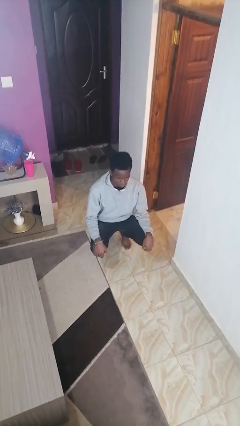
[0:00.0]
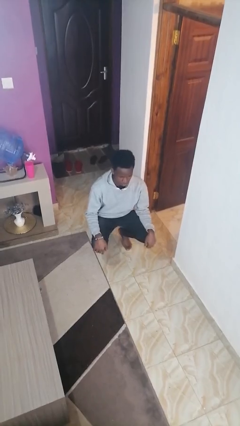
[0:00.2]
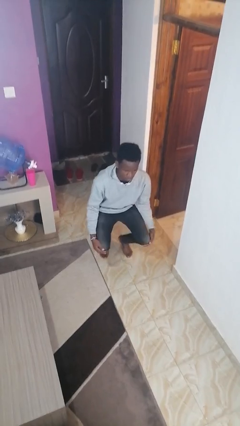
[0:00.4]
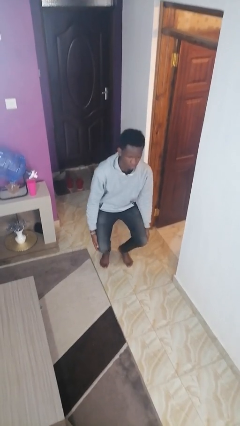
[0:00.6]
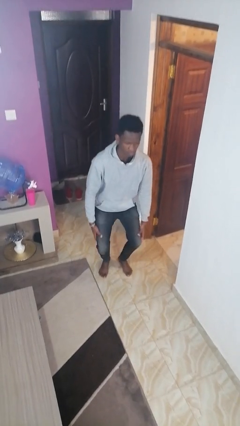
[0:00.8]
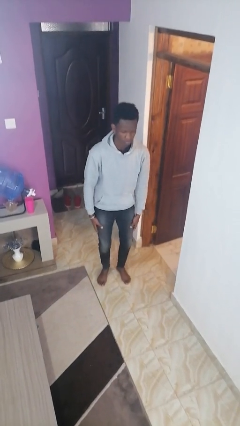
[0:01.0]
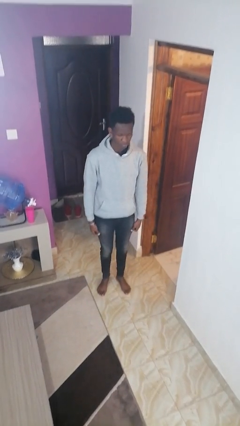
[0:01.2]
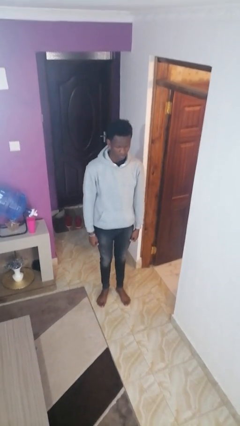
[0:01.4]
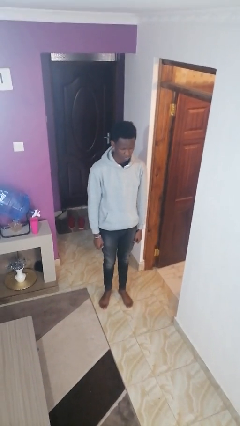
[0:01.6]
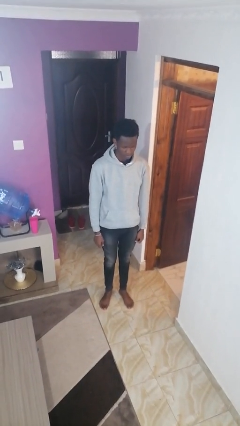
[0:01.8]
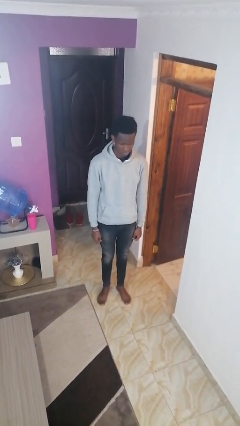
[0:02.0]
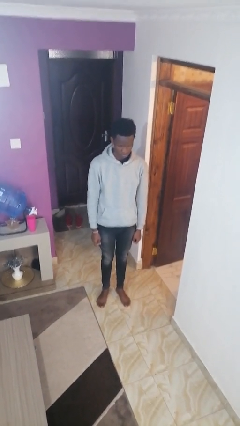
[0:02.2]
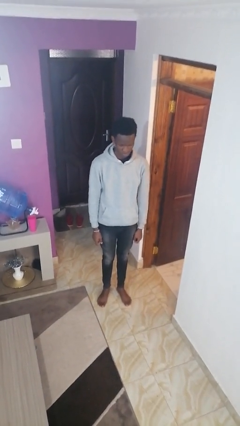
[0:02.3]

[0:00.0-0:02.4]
person stands up

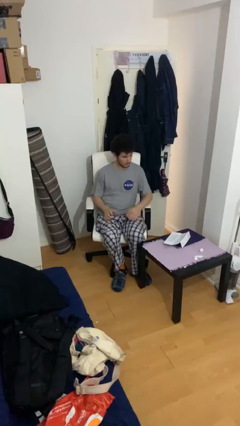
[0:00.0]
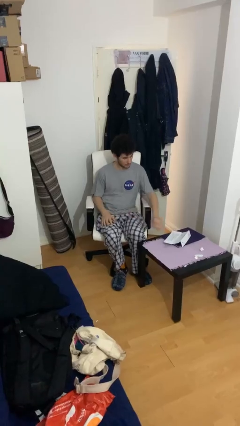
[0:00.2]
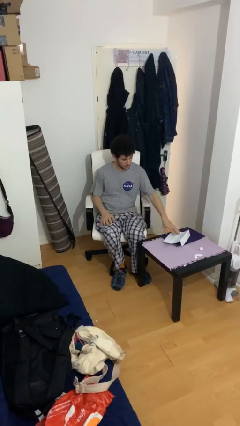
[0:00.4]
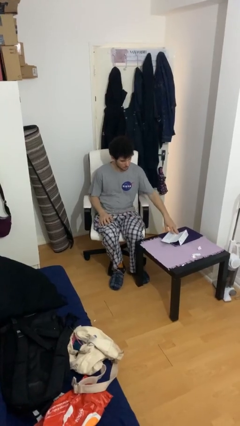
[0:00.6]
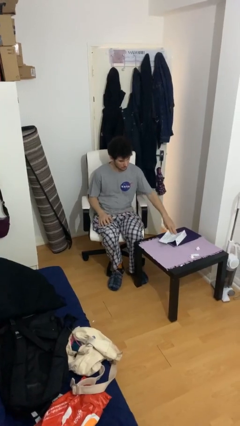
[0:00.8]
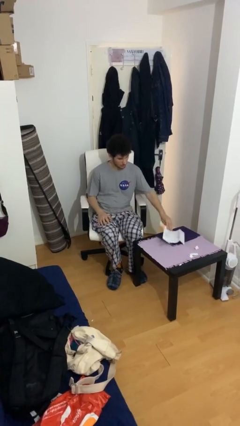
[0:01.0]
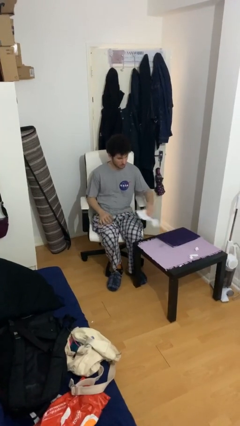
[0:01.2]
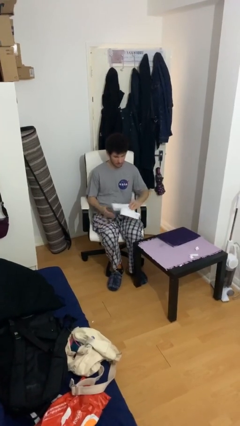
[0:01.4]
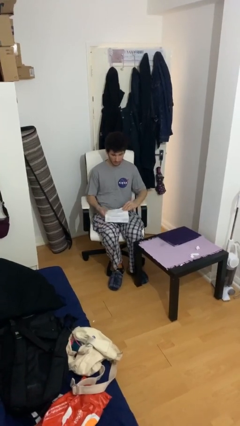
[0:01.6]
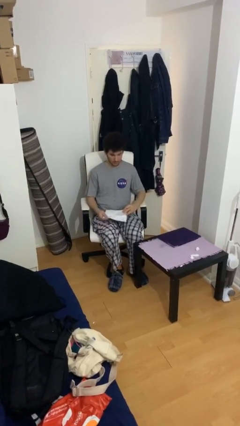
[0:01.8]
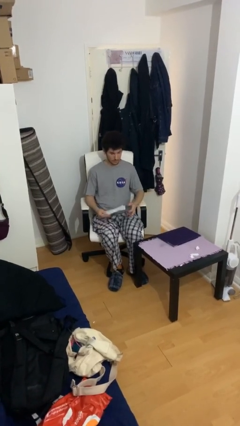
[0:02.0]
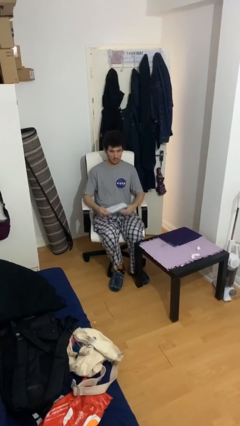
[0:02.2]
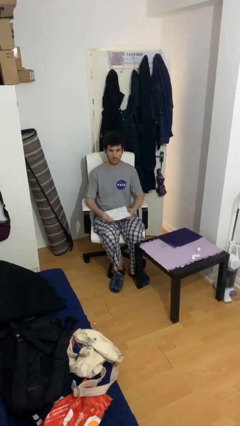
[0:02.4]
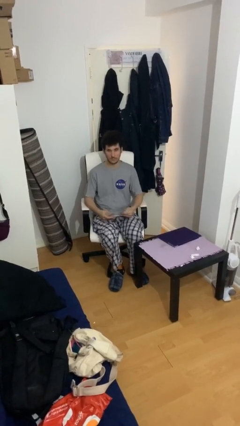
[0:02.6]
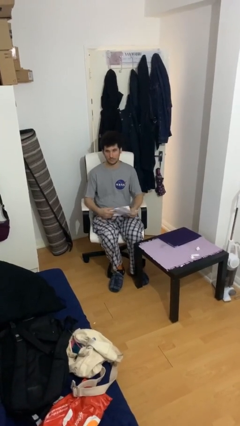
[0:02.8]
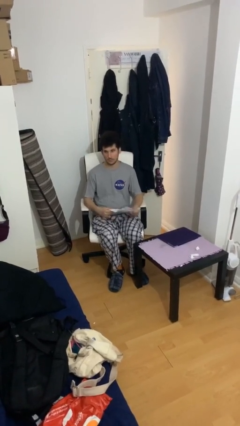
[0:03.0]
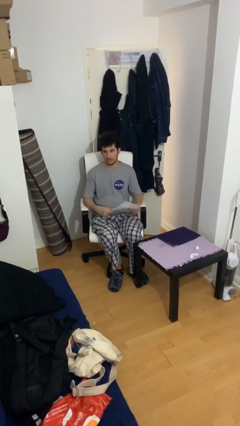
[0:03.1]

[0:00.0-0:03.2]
person picks up object from table

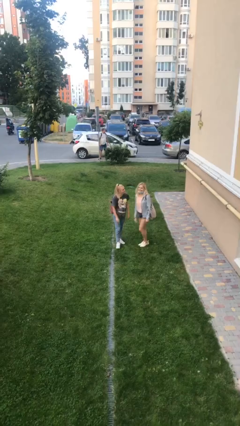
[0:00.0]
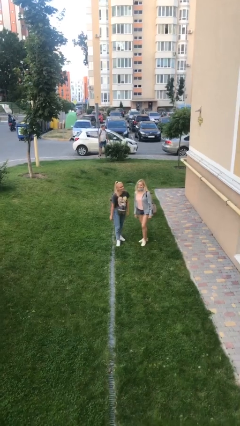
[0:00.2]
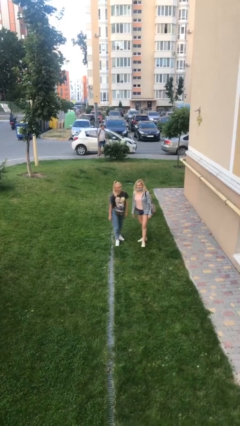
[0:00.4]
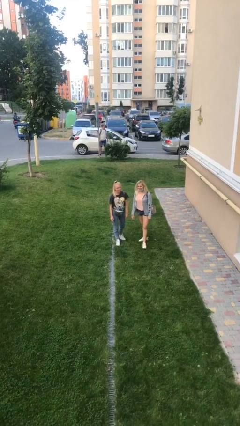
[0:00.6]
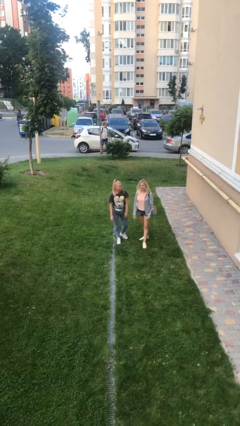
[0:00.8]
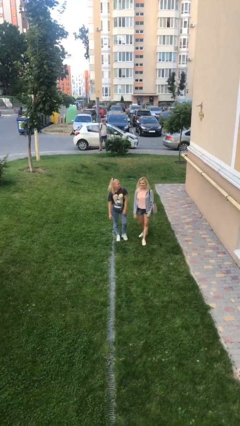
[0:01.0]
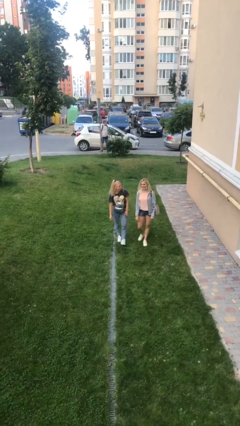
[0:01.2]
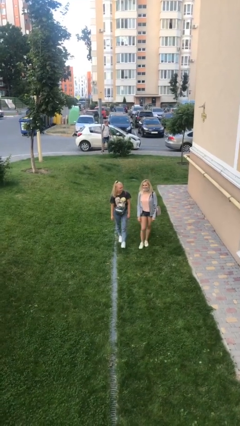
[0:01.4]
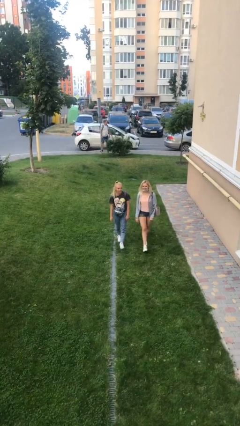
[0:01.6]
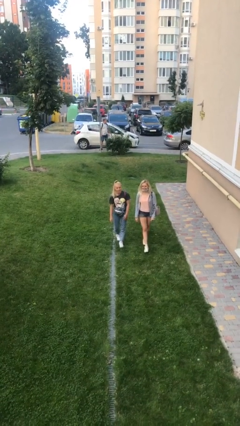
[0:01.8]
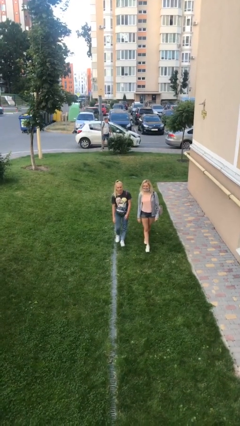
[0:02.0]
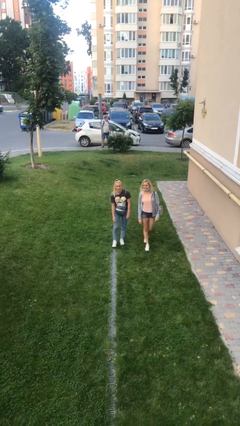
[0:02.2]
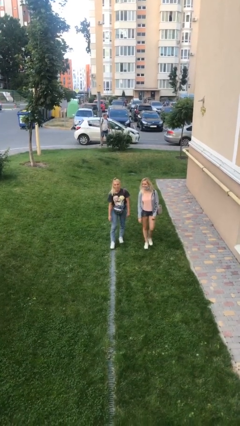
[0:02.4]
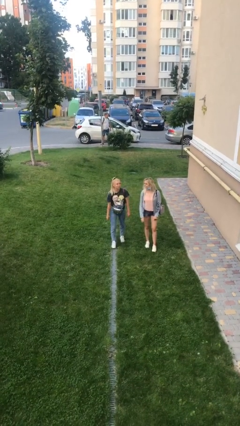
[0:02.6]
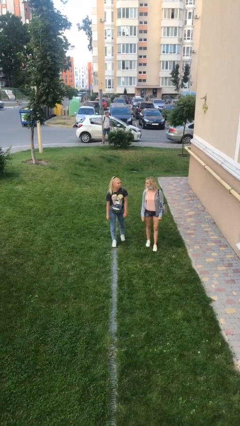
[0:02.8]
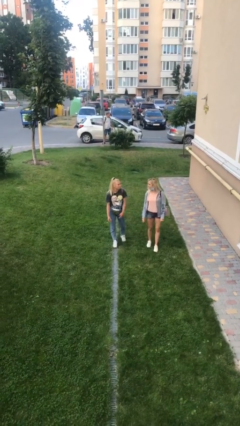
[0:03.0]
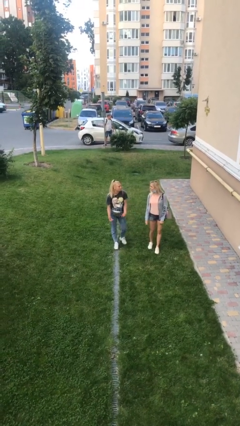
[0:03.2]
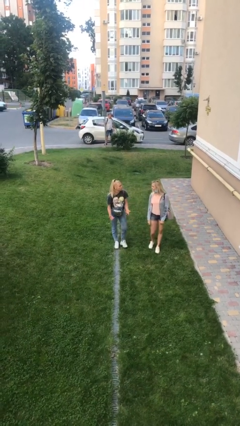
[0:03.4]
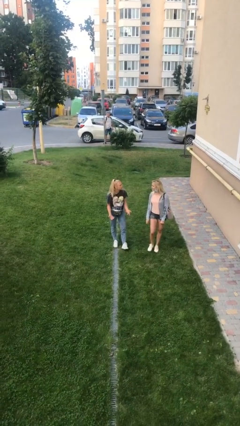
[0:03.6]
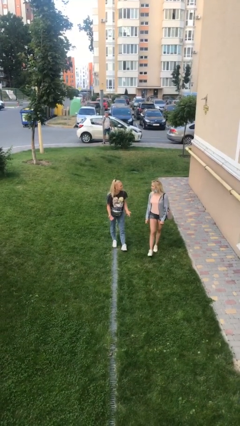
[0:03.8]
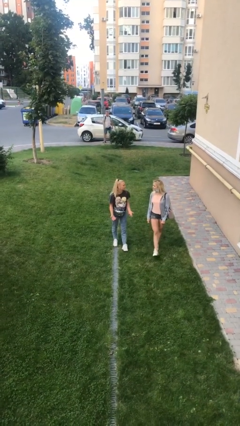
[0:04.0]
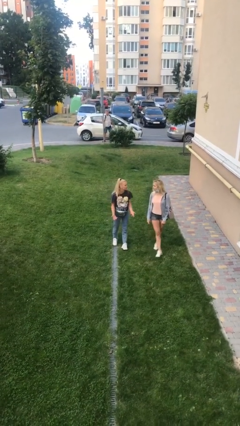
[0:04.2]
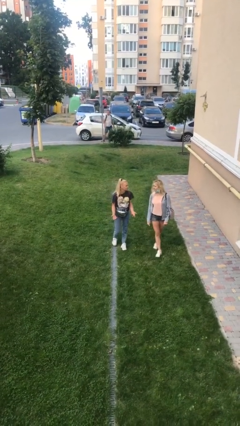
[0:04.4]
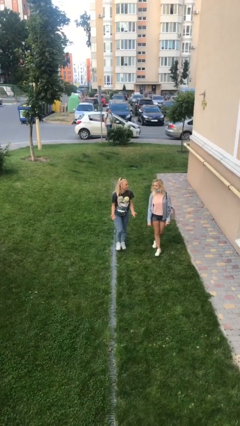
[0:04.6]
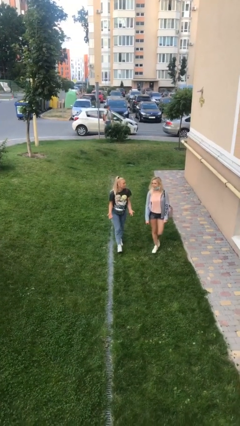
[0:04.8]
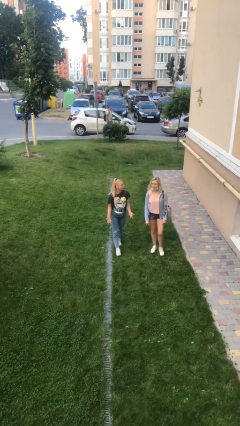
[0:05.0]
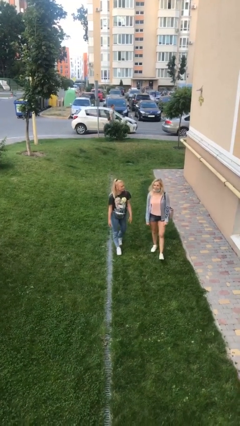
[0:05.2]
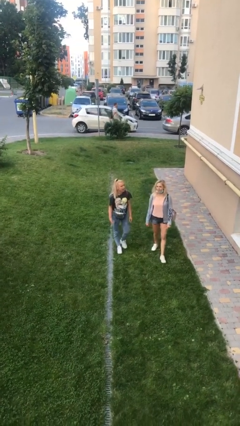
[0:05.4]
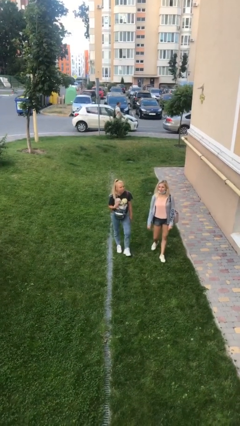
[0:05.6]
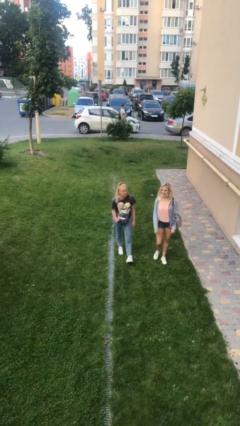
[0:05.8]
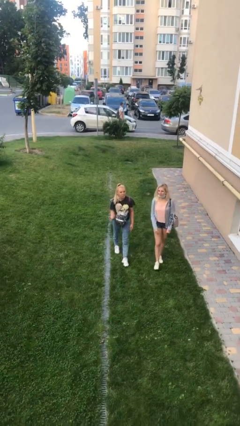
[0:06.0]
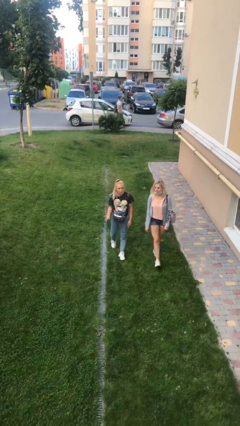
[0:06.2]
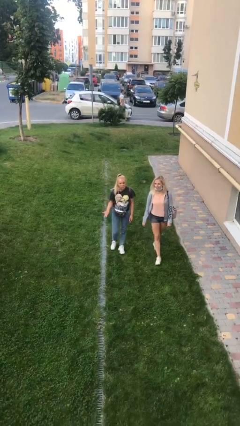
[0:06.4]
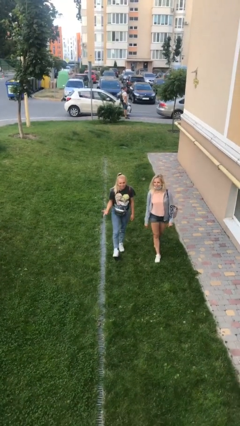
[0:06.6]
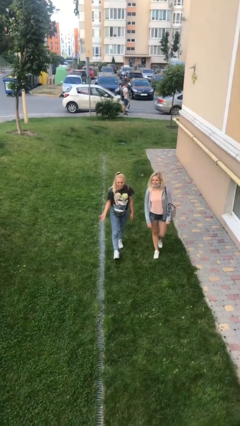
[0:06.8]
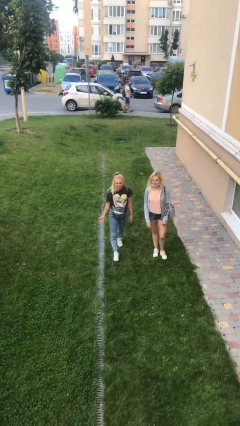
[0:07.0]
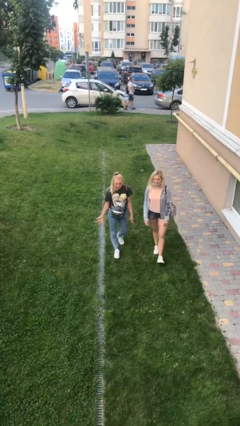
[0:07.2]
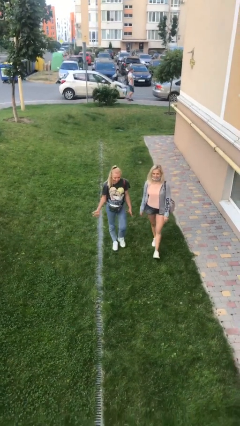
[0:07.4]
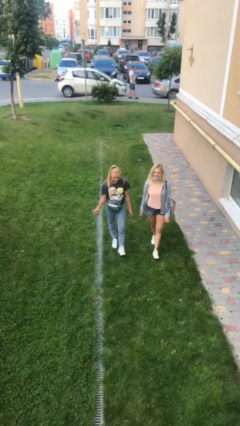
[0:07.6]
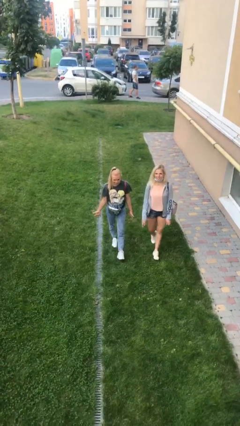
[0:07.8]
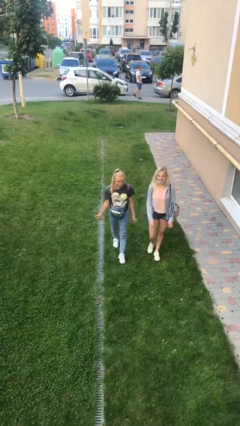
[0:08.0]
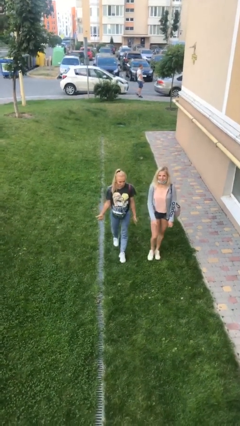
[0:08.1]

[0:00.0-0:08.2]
person talks to person

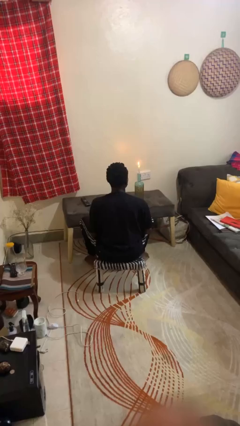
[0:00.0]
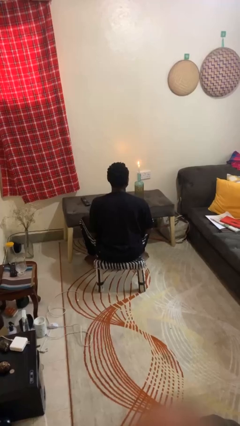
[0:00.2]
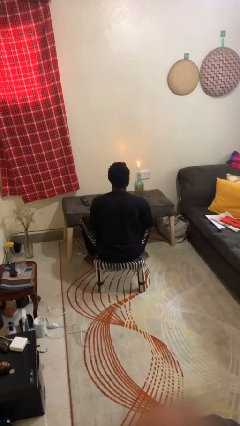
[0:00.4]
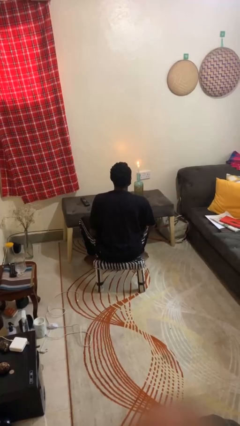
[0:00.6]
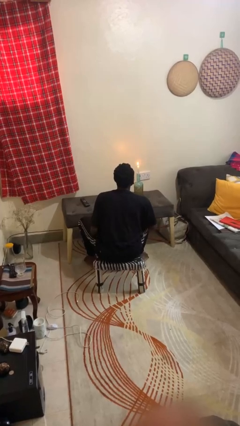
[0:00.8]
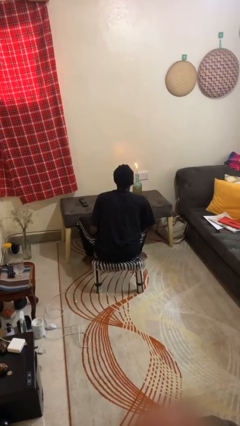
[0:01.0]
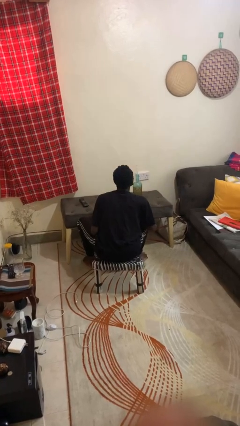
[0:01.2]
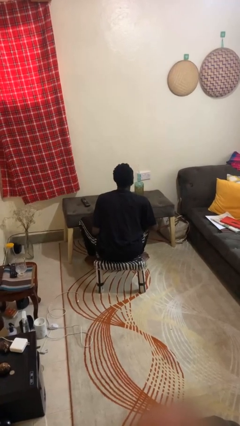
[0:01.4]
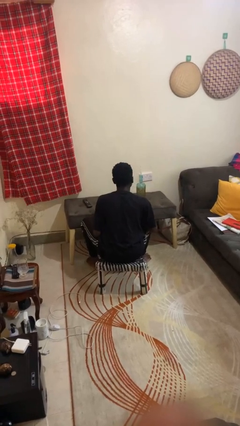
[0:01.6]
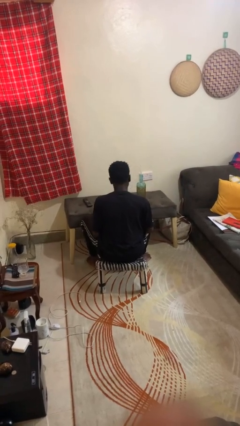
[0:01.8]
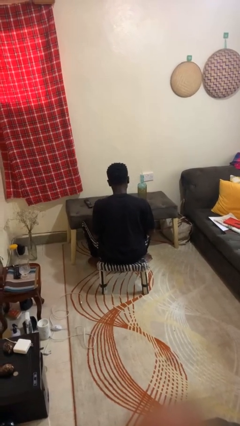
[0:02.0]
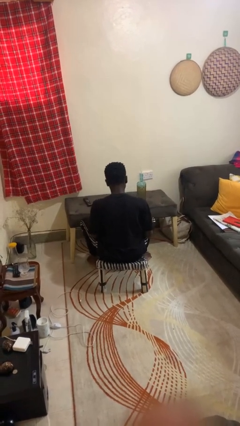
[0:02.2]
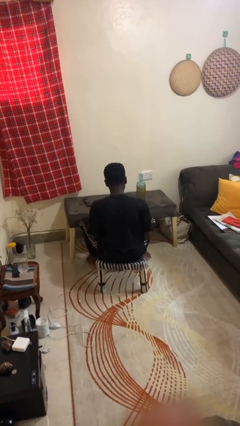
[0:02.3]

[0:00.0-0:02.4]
person extinguishes candle

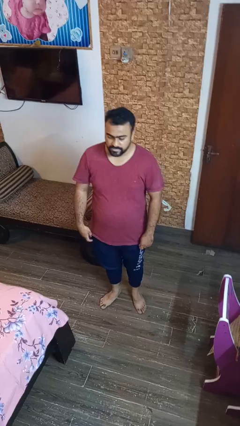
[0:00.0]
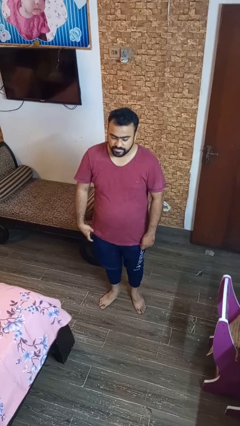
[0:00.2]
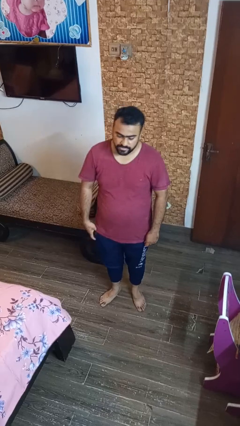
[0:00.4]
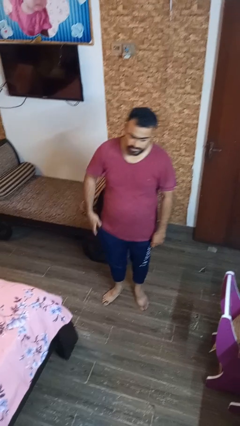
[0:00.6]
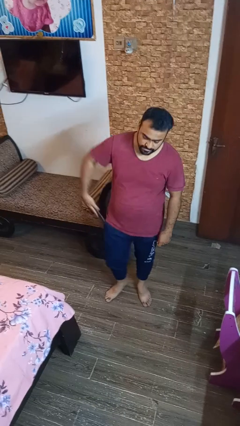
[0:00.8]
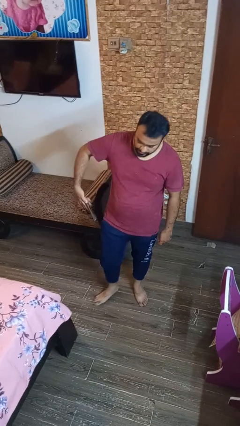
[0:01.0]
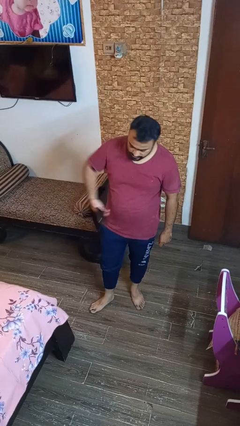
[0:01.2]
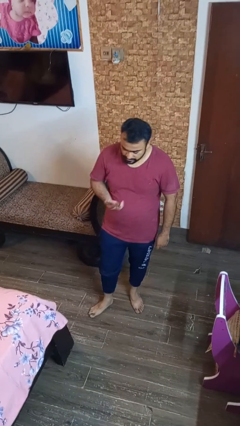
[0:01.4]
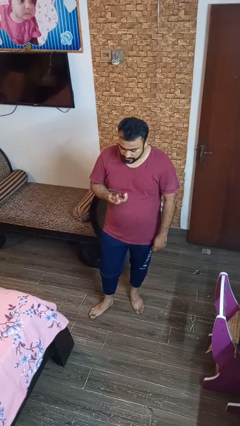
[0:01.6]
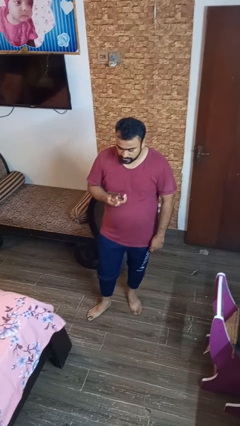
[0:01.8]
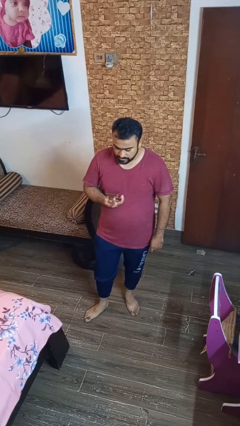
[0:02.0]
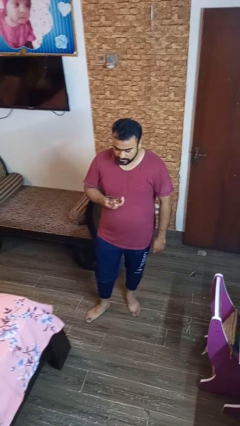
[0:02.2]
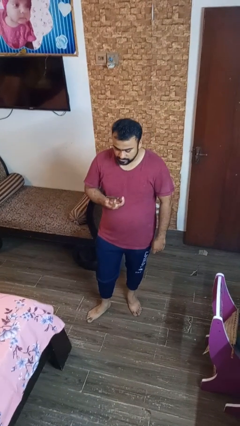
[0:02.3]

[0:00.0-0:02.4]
person takes phone from pocket
